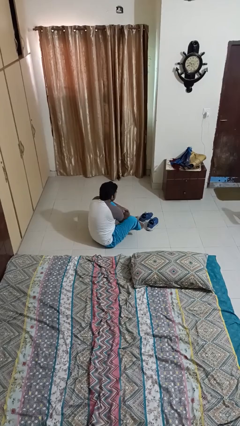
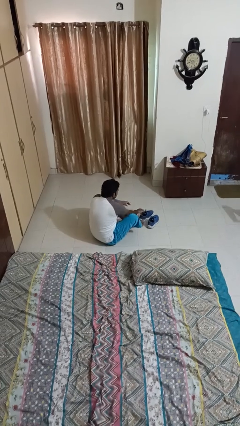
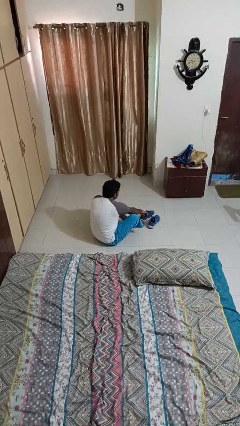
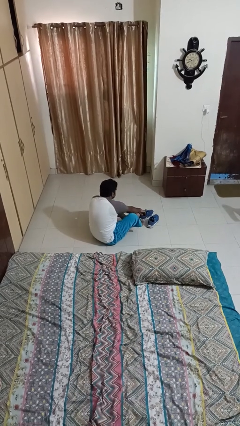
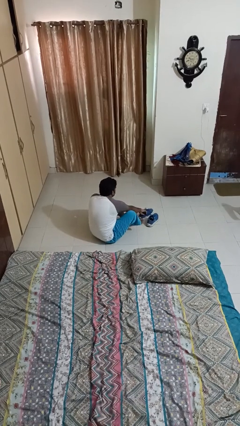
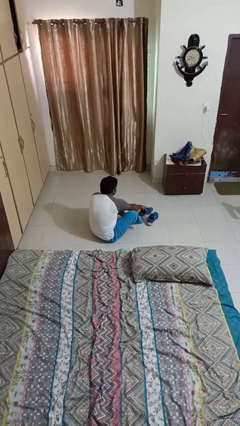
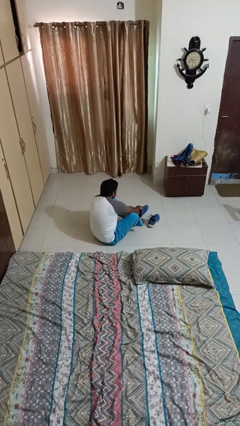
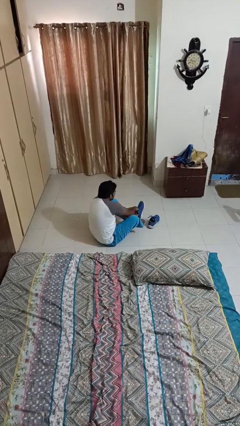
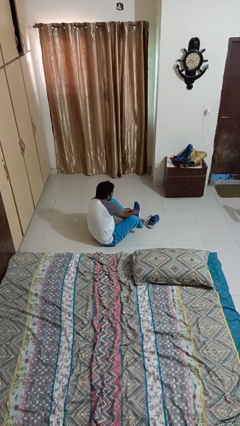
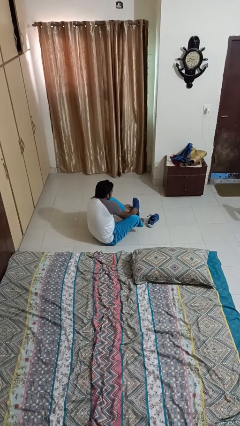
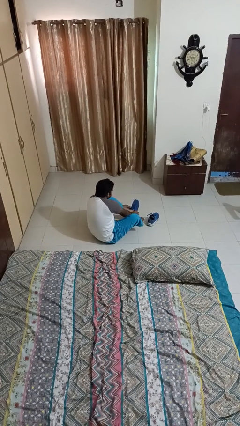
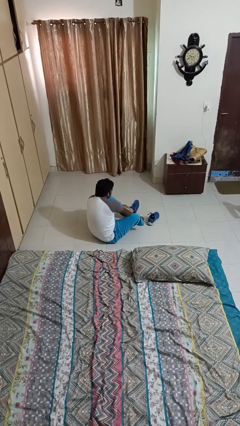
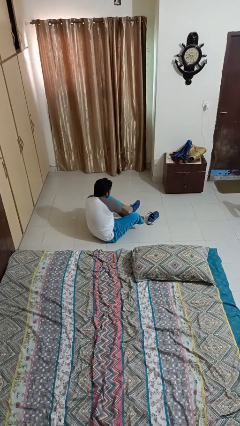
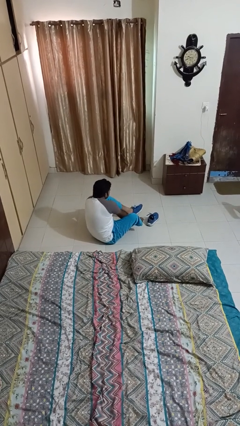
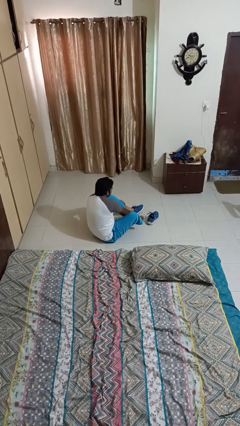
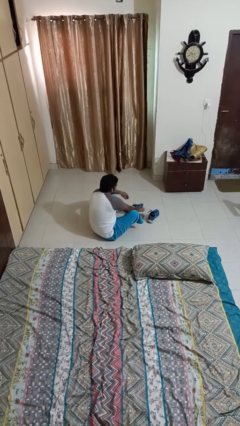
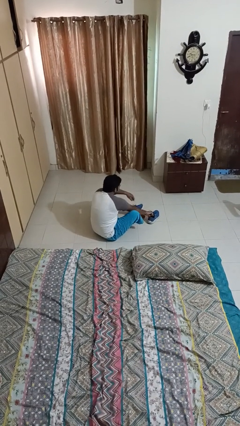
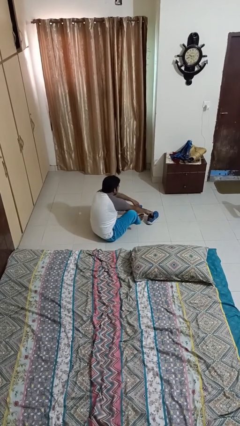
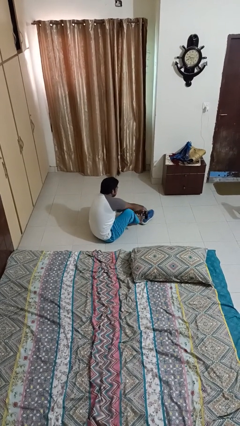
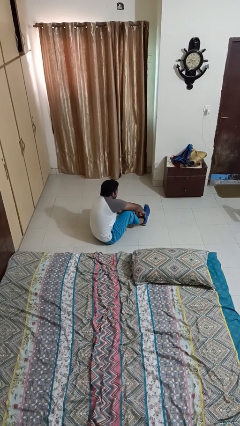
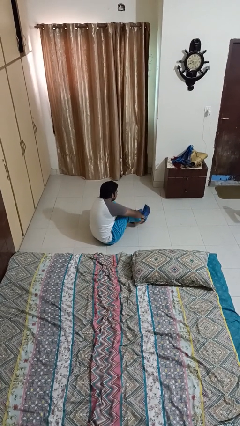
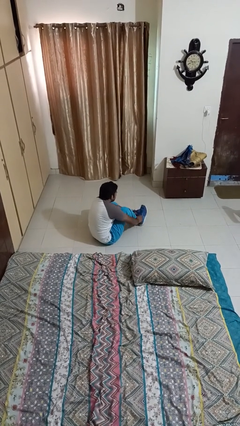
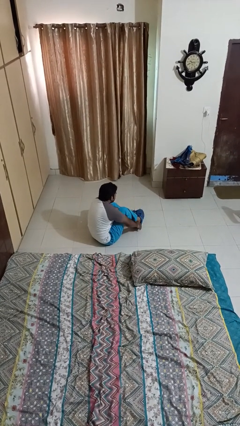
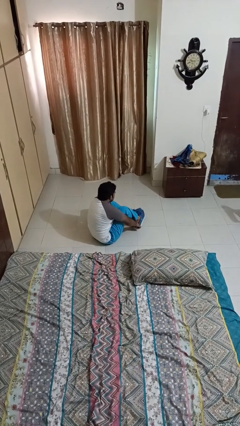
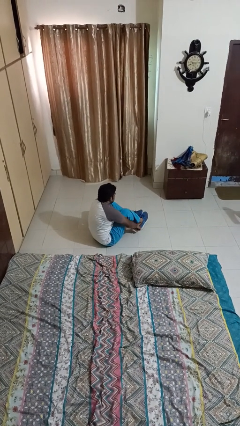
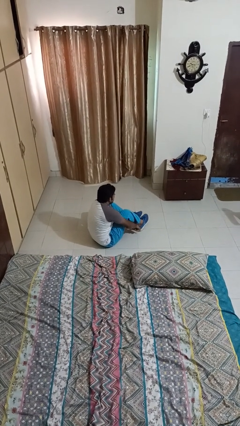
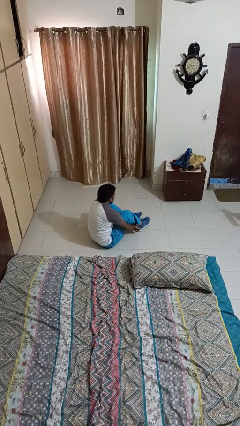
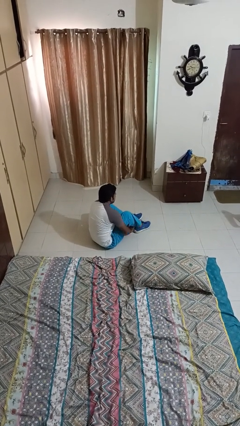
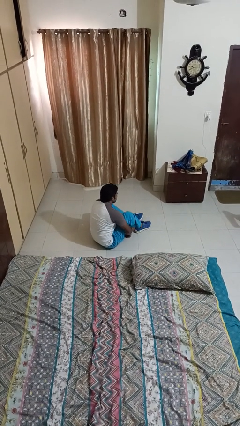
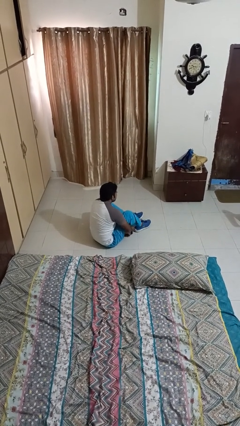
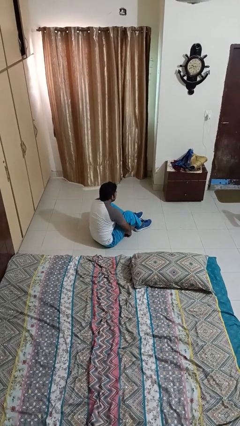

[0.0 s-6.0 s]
person puts on shoes

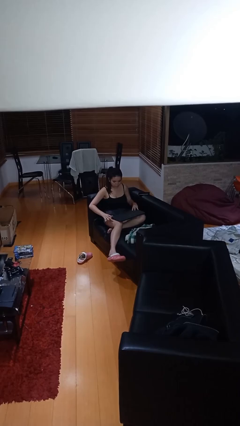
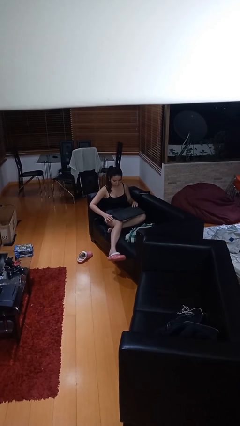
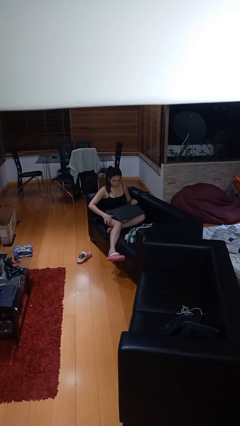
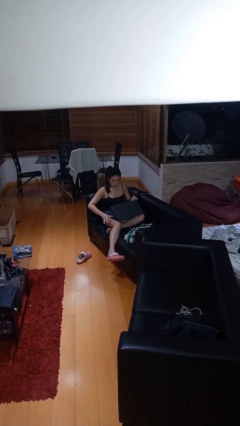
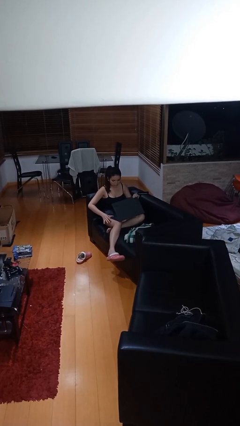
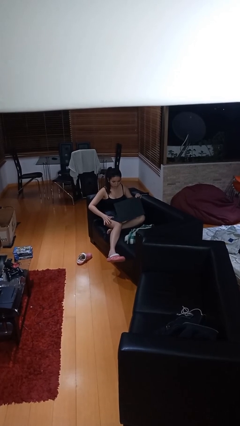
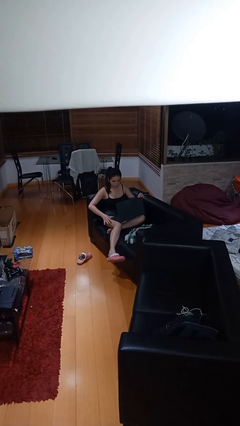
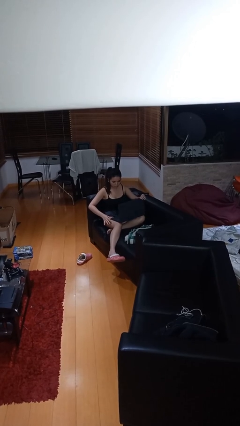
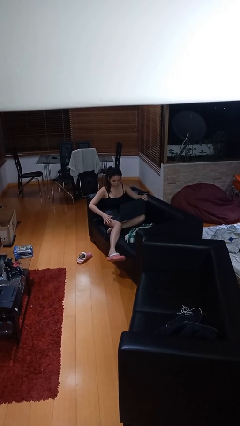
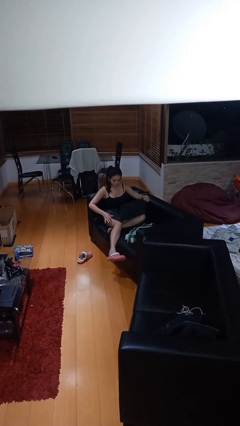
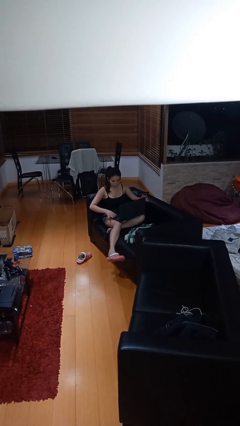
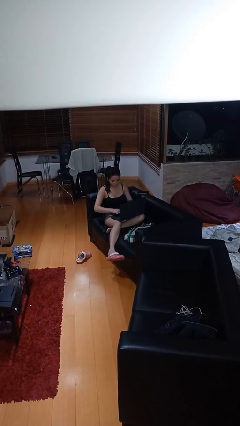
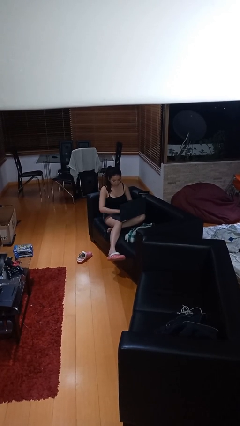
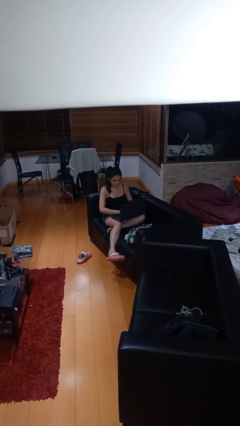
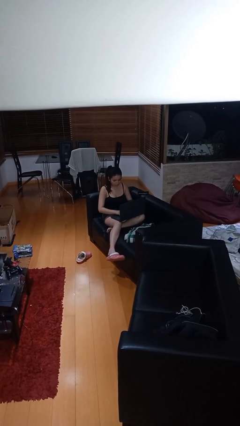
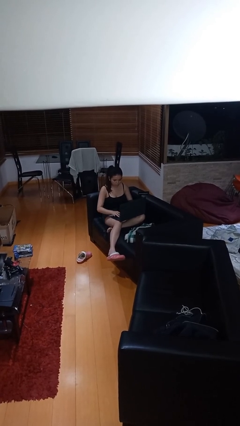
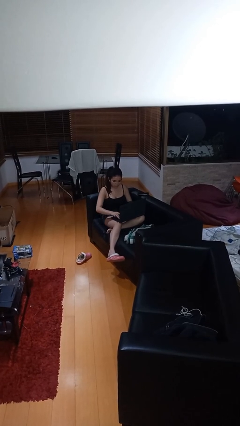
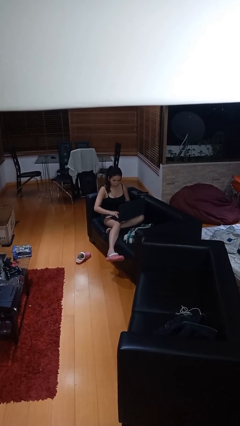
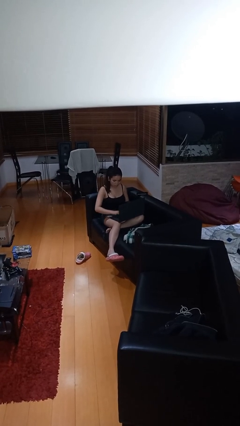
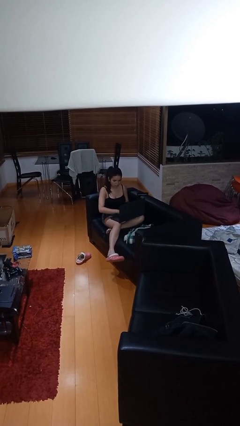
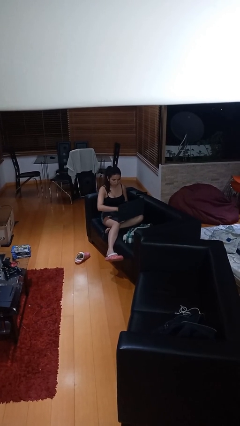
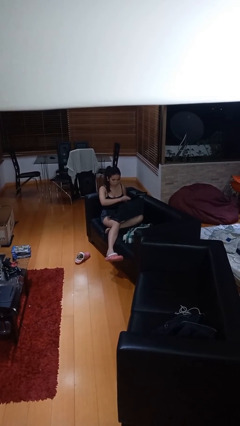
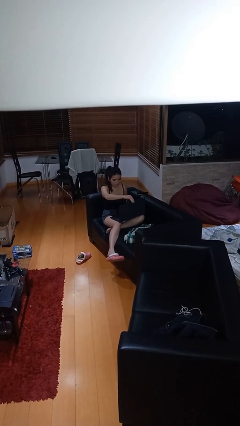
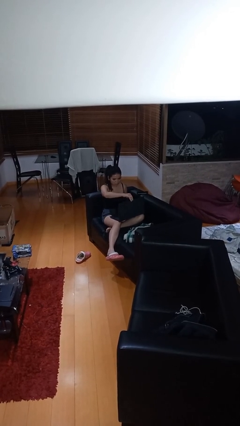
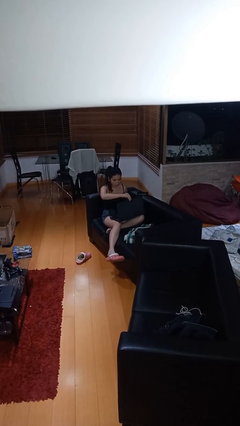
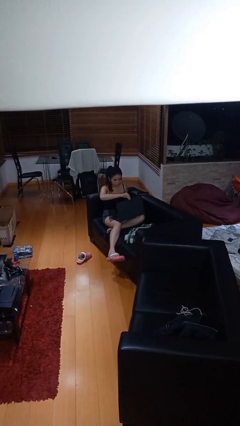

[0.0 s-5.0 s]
person interacts with laptop

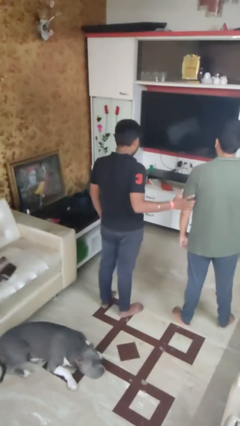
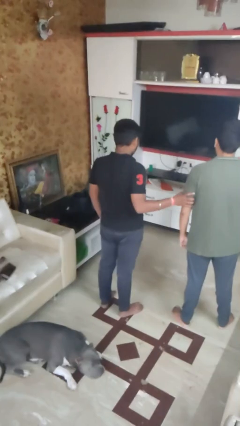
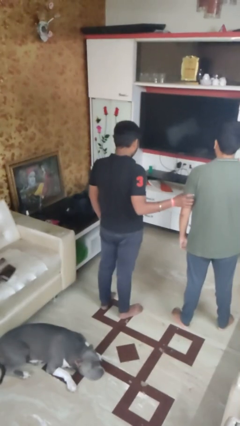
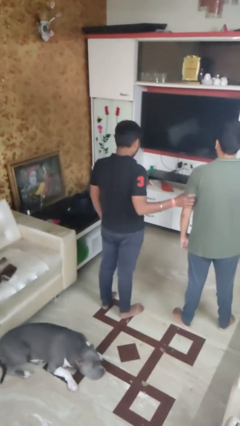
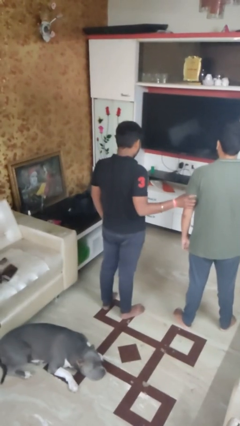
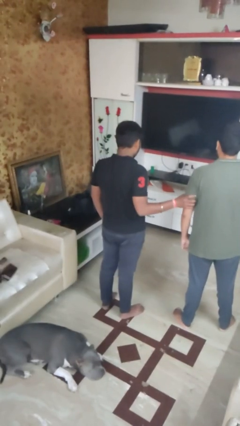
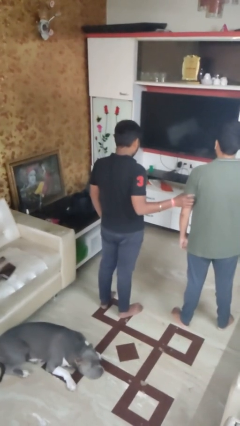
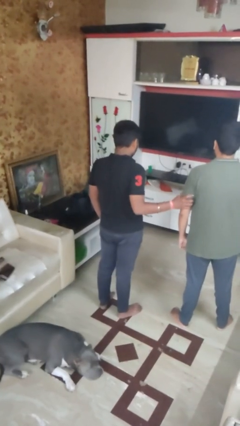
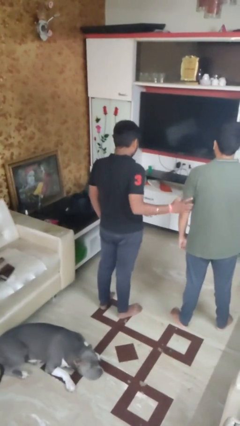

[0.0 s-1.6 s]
person grabs person by bicep

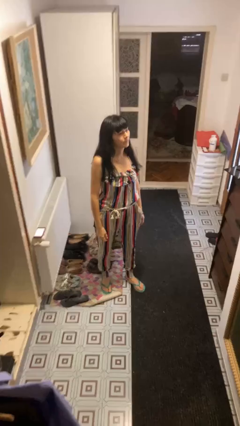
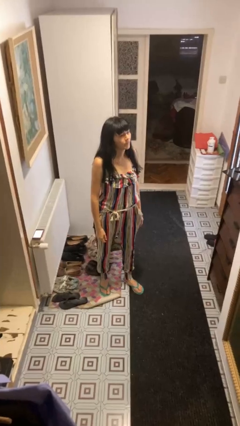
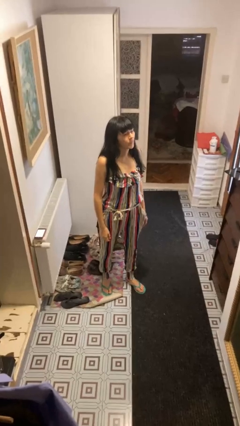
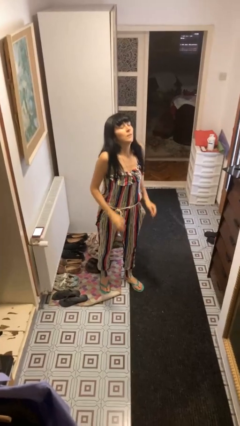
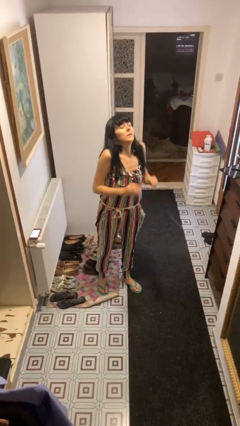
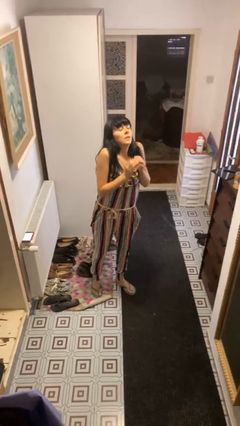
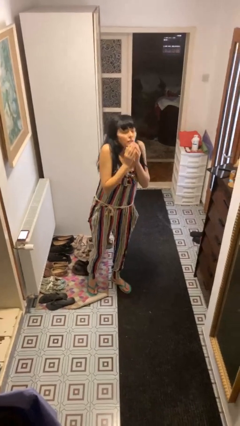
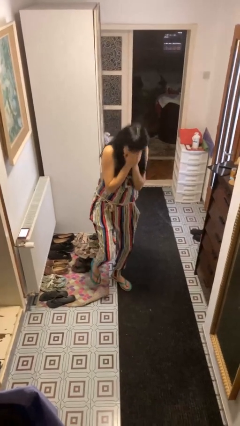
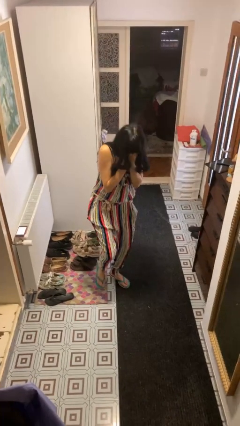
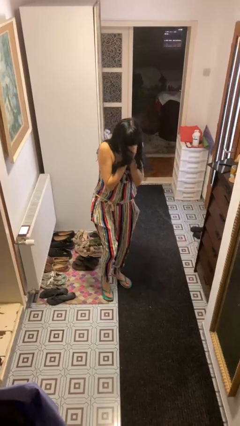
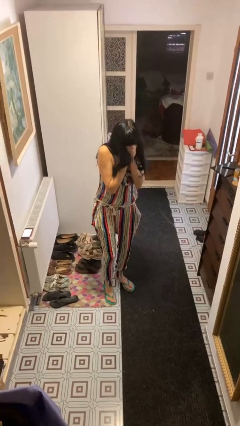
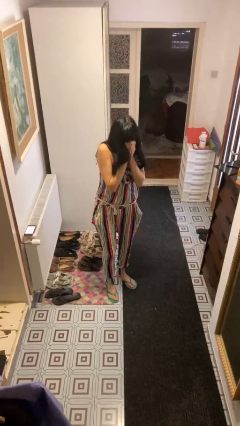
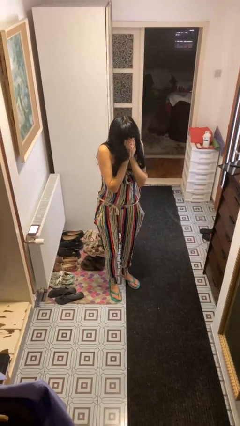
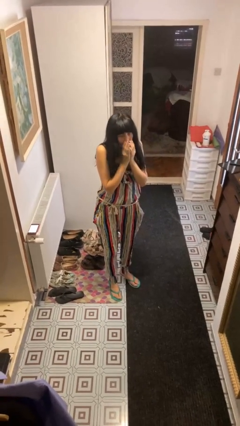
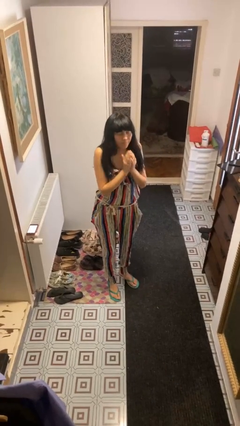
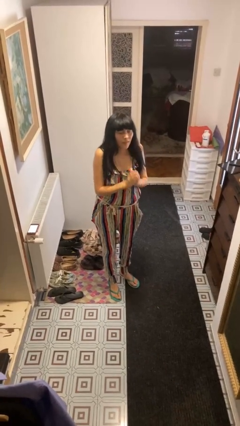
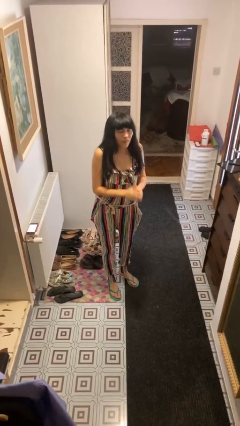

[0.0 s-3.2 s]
person sneezes into hand

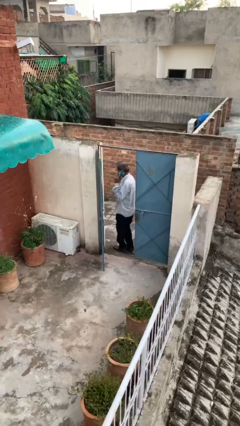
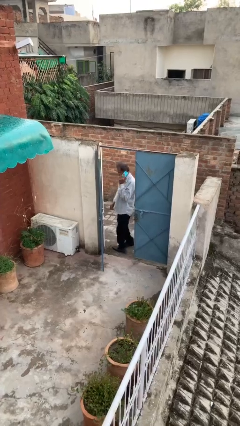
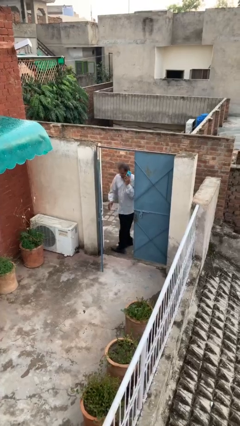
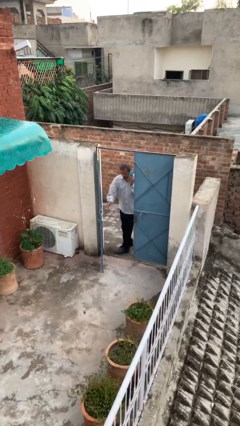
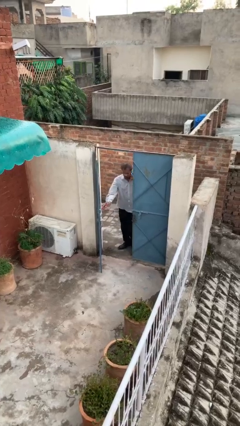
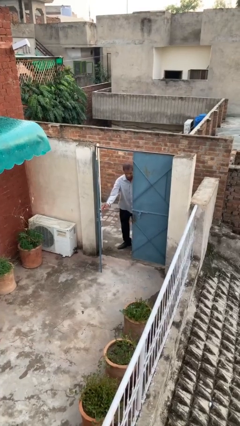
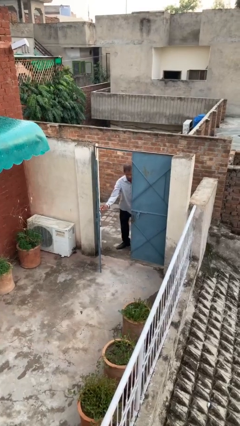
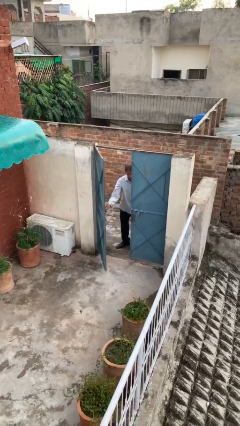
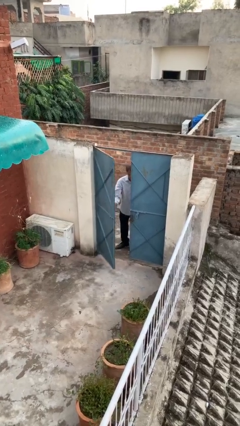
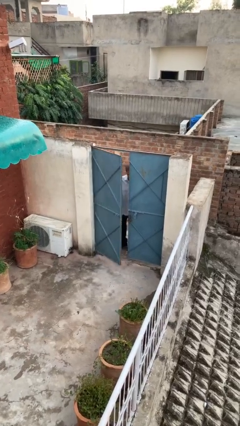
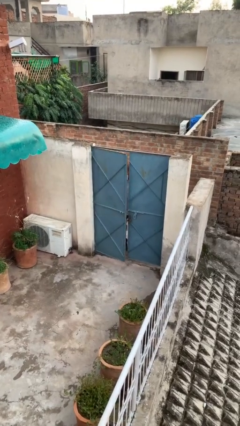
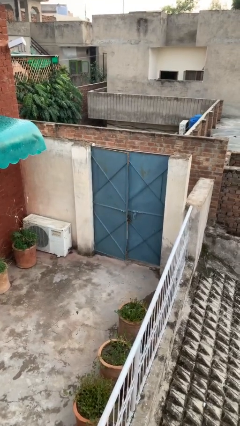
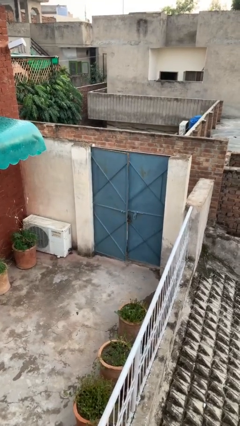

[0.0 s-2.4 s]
person closes facility door
